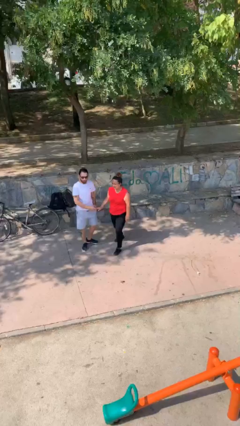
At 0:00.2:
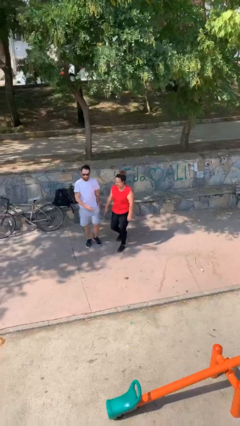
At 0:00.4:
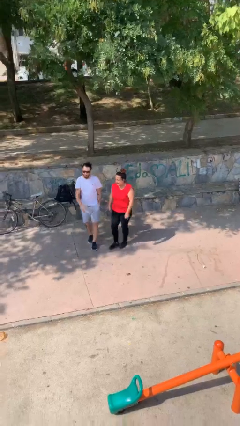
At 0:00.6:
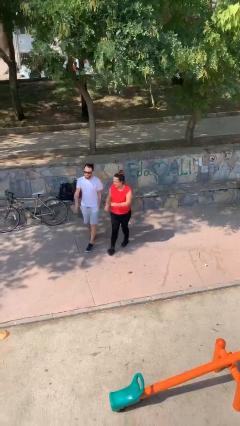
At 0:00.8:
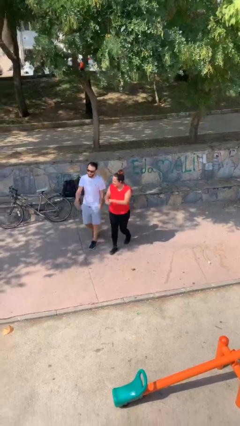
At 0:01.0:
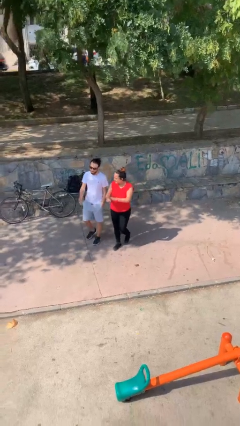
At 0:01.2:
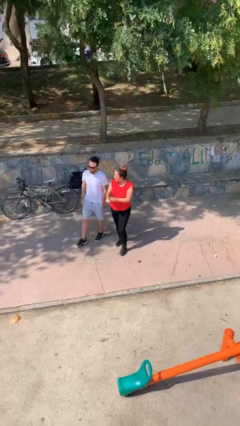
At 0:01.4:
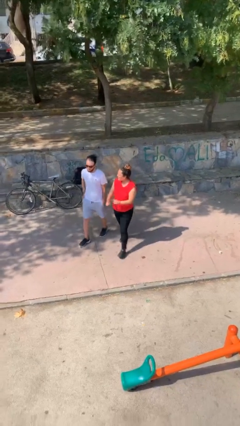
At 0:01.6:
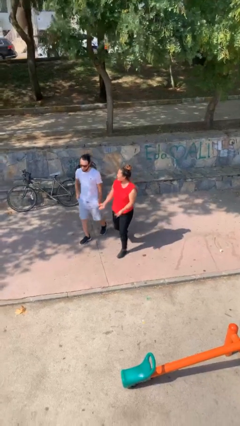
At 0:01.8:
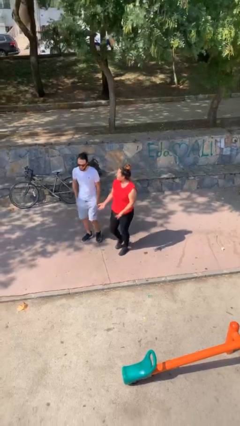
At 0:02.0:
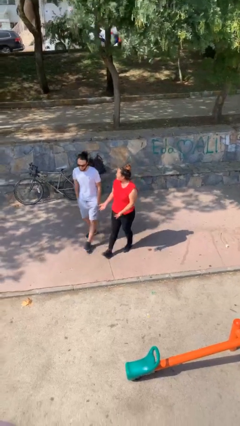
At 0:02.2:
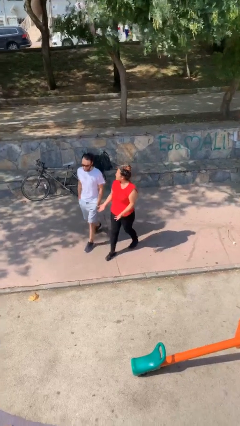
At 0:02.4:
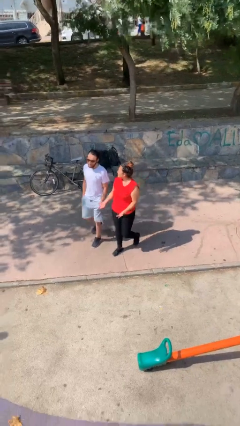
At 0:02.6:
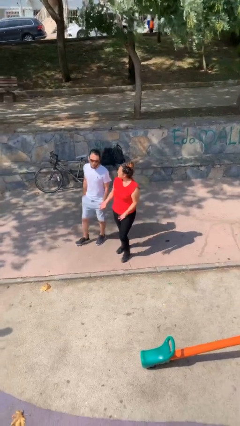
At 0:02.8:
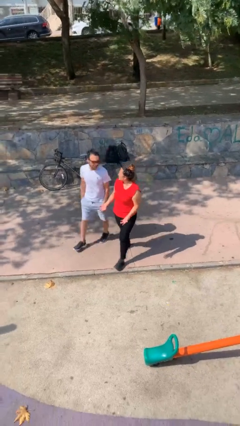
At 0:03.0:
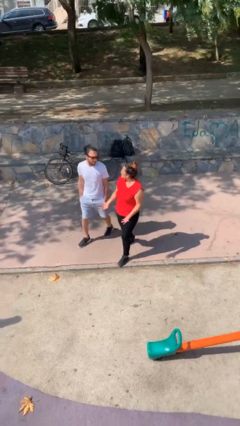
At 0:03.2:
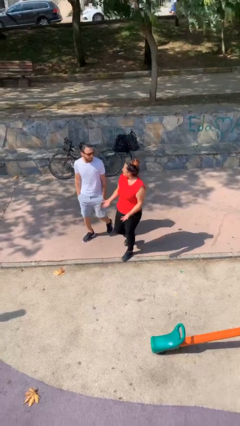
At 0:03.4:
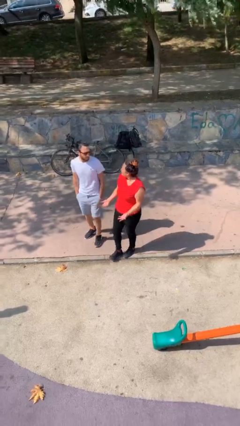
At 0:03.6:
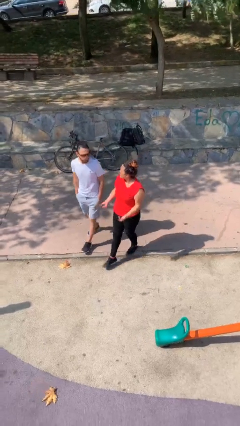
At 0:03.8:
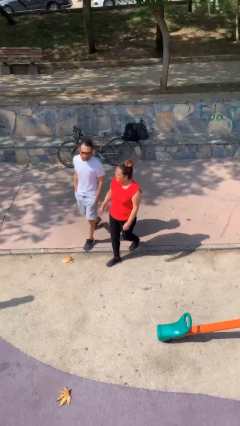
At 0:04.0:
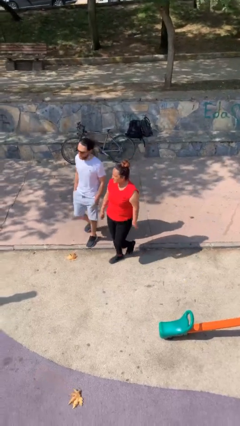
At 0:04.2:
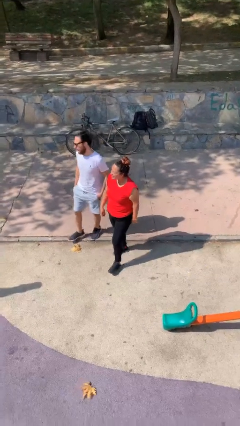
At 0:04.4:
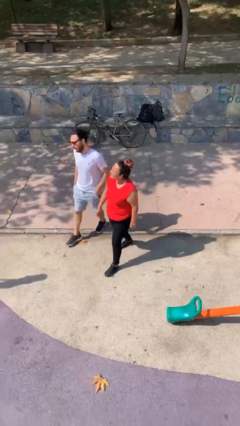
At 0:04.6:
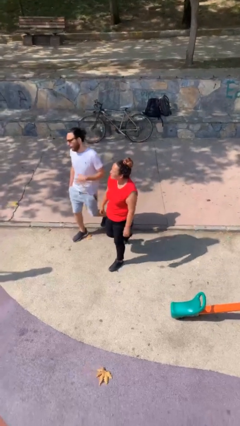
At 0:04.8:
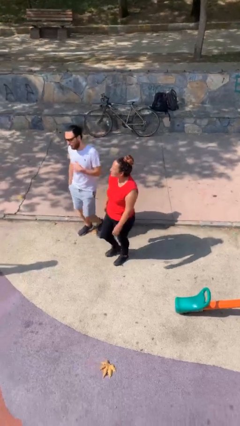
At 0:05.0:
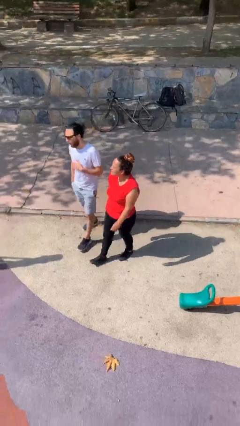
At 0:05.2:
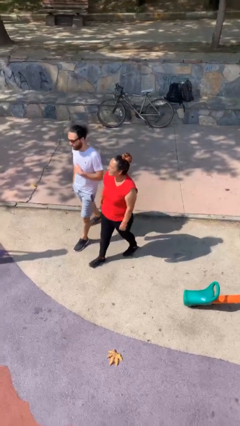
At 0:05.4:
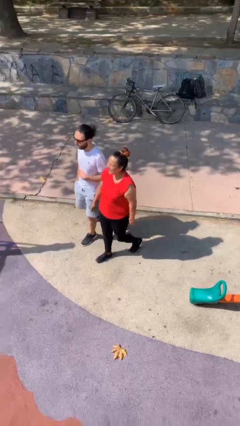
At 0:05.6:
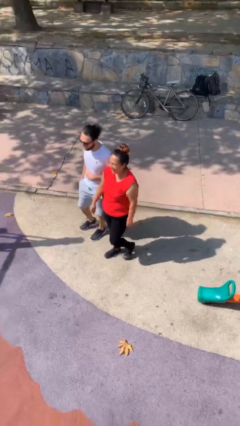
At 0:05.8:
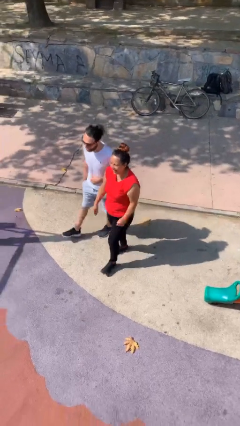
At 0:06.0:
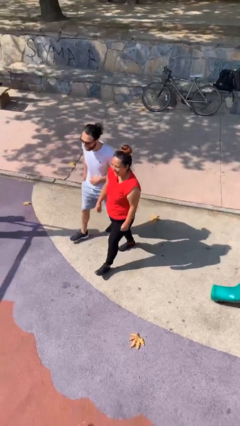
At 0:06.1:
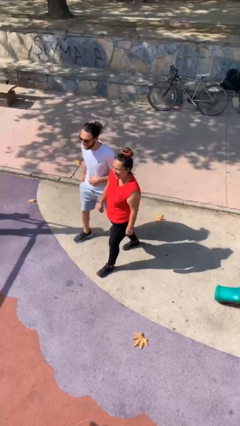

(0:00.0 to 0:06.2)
person talks to person

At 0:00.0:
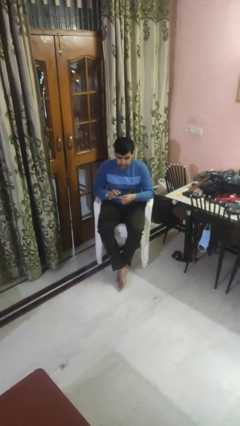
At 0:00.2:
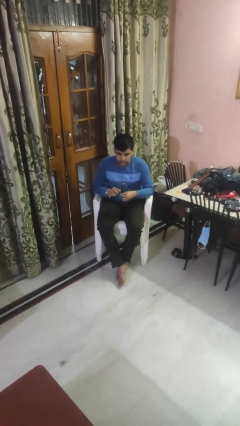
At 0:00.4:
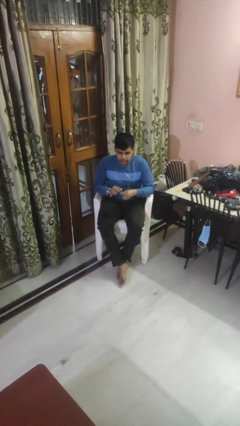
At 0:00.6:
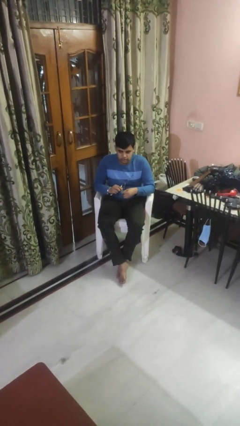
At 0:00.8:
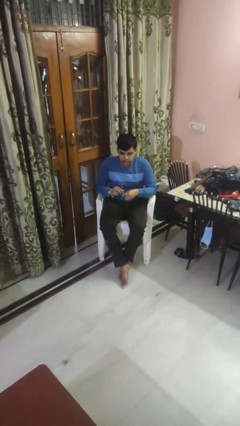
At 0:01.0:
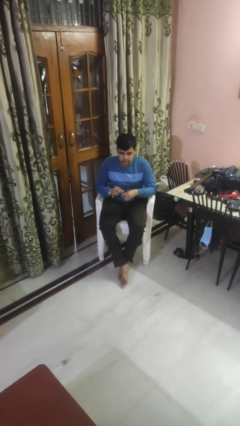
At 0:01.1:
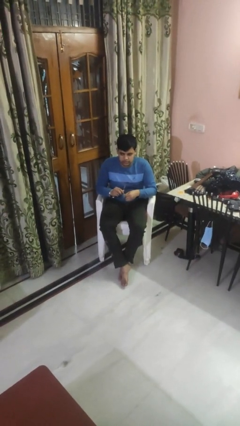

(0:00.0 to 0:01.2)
person cleans eyeglasses

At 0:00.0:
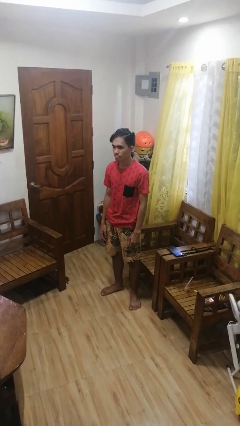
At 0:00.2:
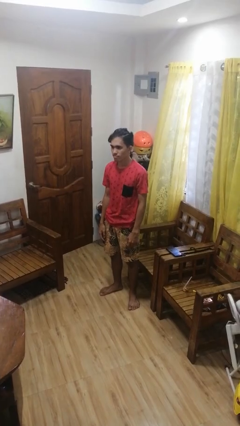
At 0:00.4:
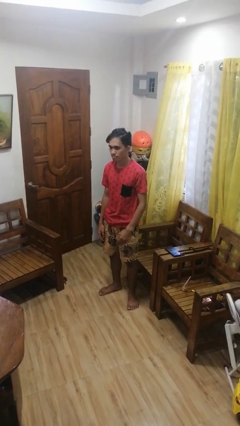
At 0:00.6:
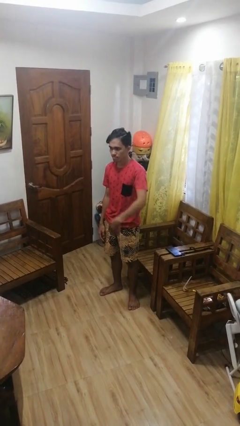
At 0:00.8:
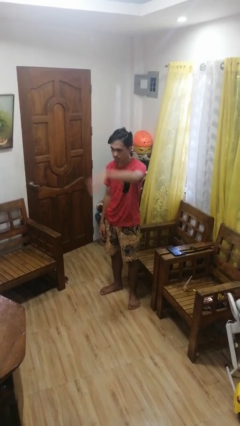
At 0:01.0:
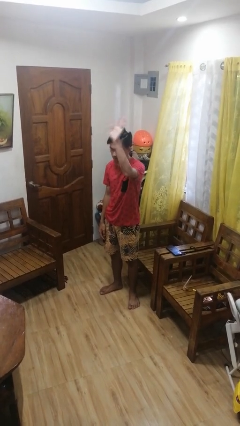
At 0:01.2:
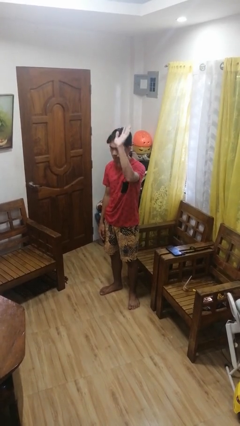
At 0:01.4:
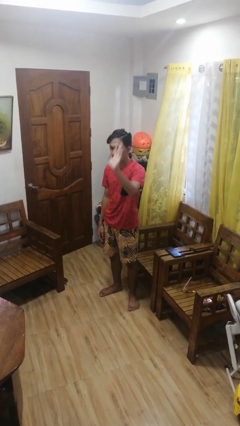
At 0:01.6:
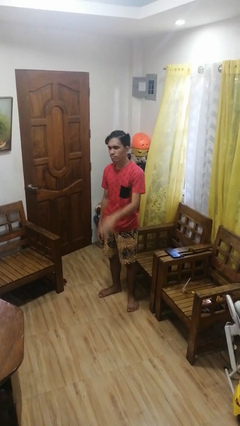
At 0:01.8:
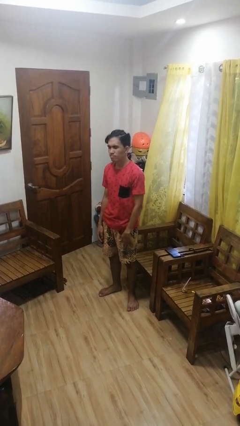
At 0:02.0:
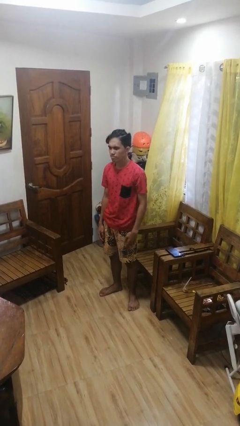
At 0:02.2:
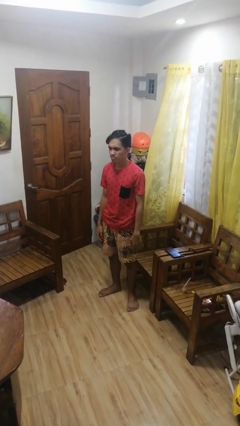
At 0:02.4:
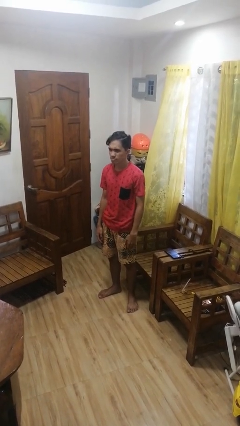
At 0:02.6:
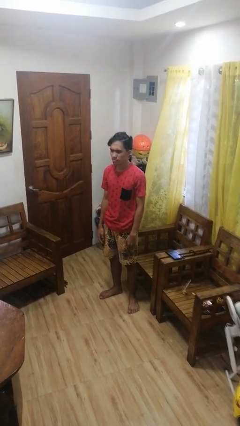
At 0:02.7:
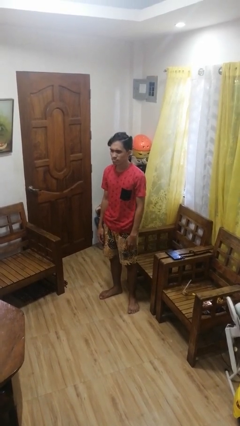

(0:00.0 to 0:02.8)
person gestures swipe up

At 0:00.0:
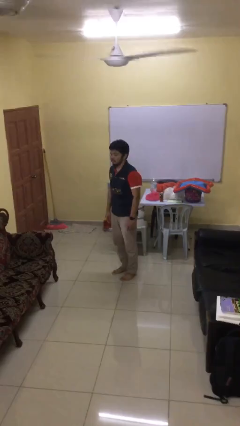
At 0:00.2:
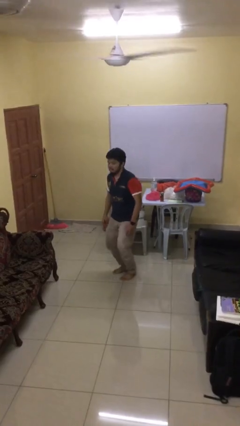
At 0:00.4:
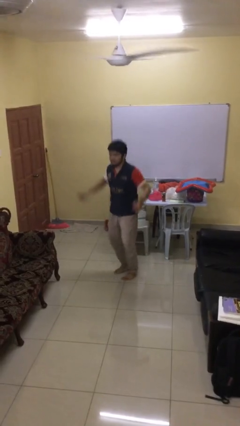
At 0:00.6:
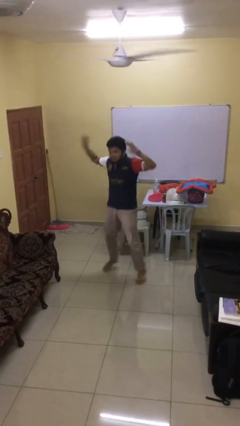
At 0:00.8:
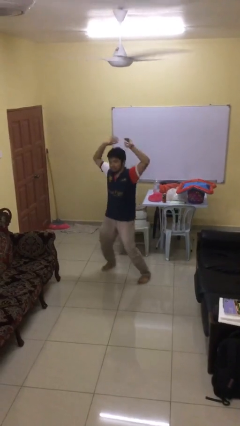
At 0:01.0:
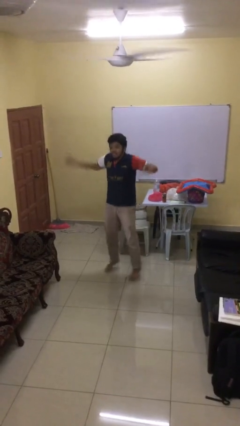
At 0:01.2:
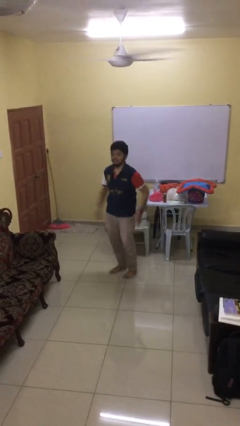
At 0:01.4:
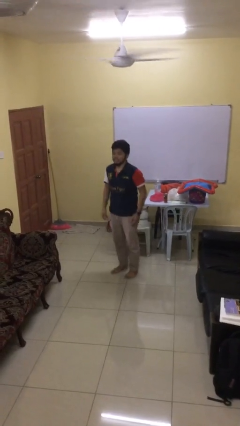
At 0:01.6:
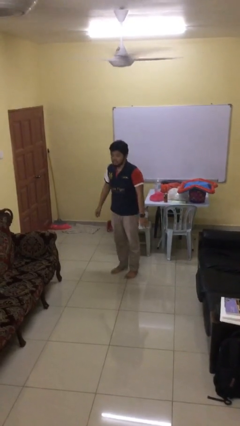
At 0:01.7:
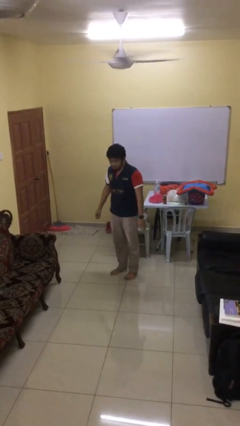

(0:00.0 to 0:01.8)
person exercises with jumping jacks

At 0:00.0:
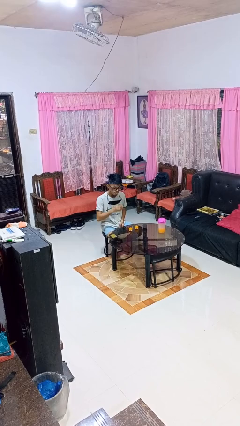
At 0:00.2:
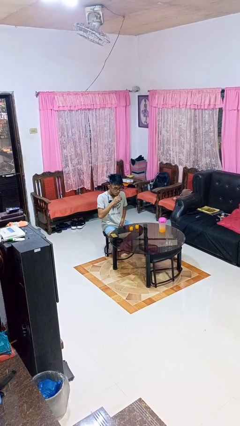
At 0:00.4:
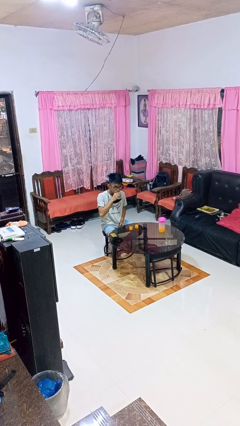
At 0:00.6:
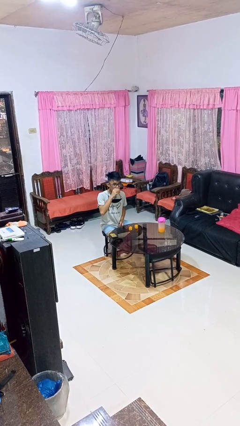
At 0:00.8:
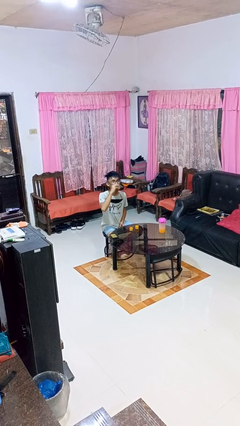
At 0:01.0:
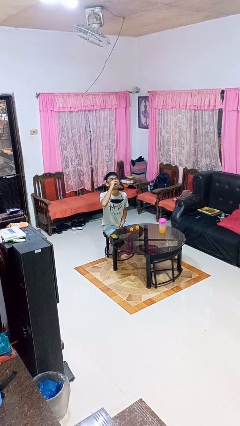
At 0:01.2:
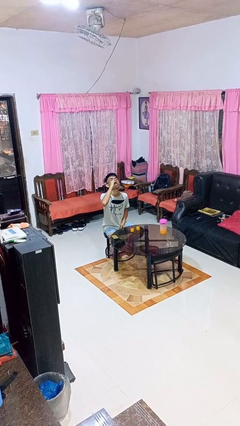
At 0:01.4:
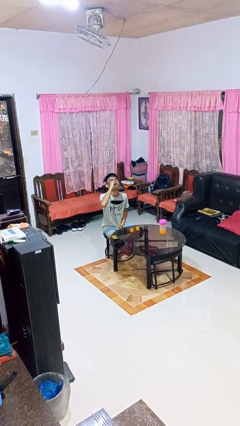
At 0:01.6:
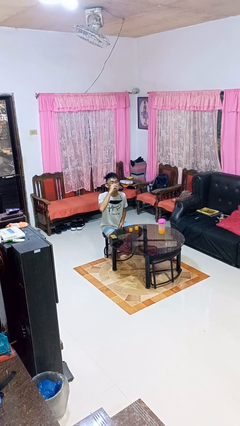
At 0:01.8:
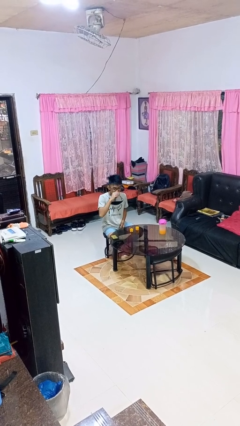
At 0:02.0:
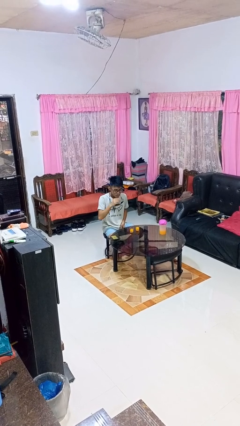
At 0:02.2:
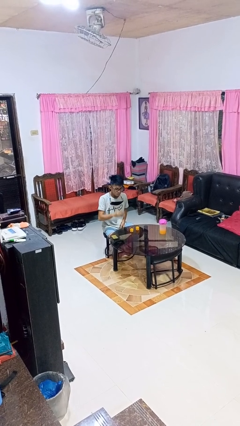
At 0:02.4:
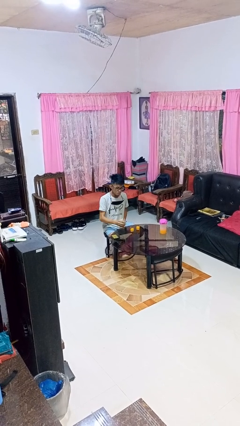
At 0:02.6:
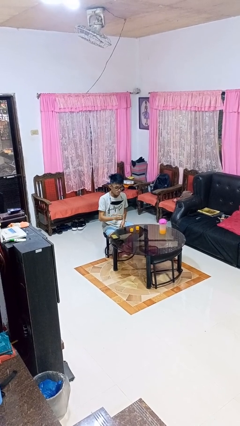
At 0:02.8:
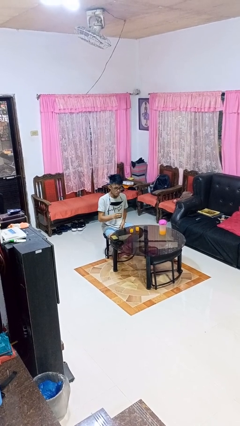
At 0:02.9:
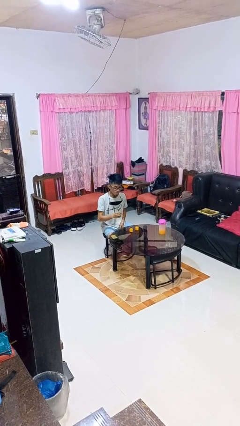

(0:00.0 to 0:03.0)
person drinks from shotglass

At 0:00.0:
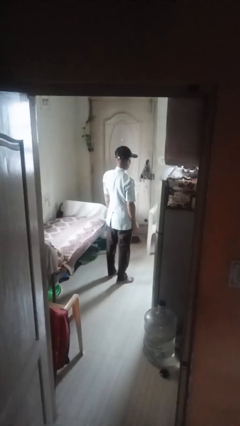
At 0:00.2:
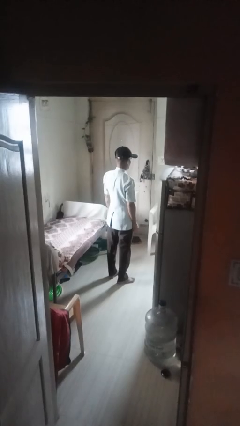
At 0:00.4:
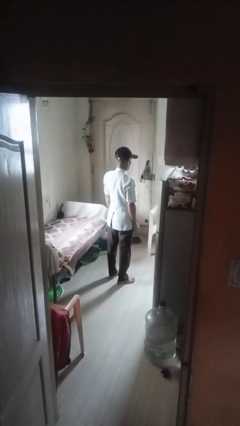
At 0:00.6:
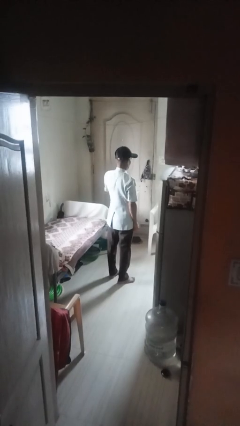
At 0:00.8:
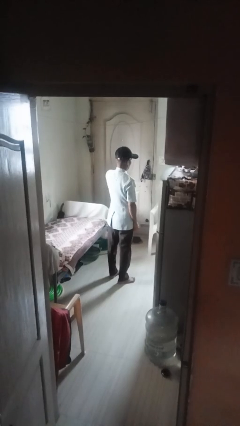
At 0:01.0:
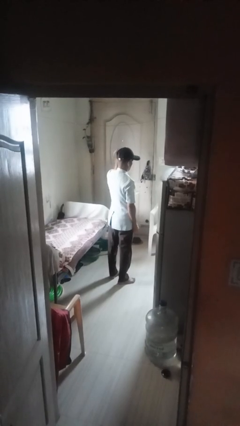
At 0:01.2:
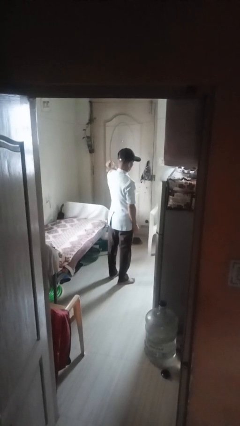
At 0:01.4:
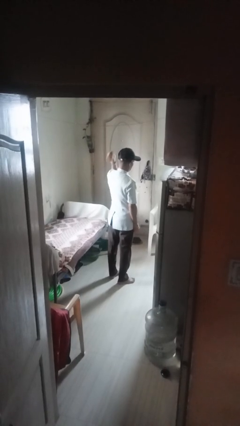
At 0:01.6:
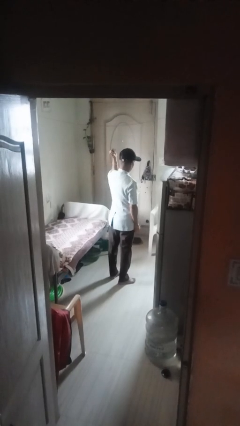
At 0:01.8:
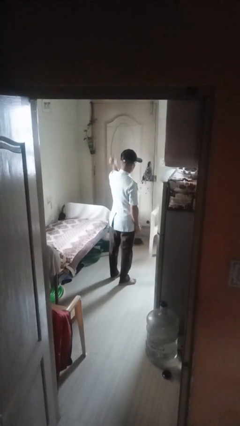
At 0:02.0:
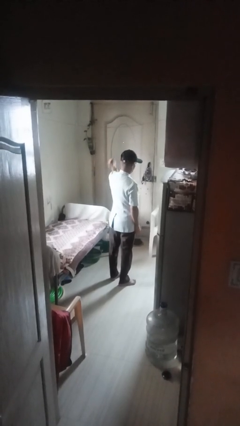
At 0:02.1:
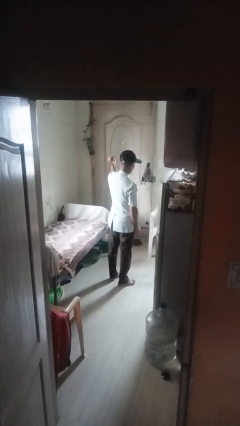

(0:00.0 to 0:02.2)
person gestures behind me

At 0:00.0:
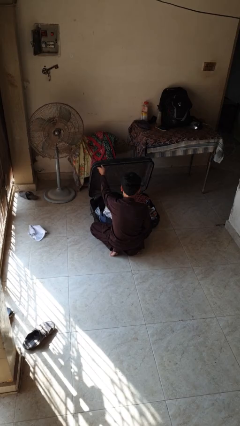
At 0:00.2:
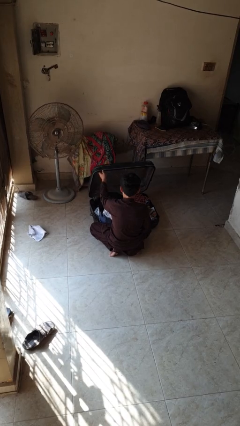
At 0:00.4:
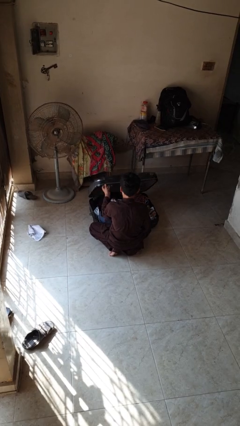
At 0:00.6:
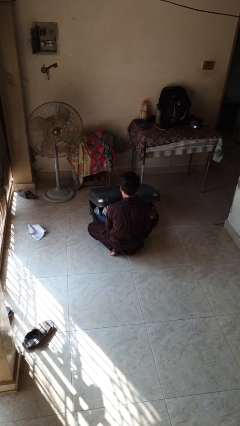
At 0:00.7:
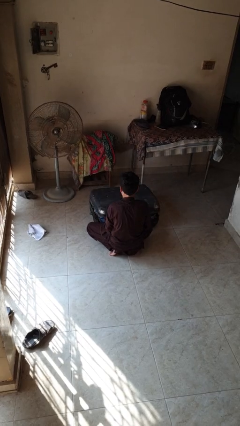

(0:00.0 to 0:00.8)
person closes suitcase
